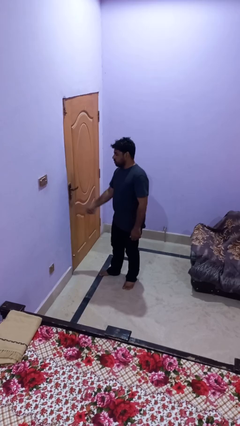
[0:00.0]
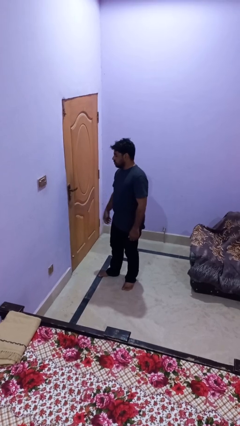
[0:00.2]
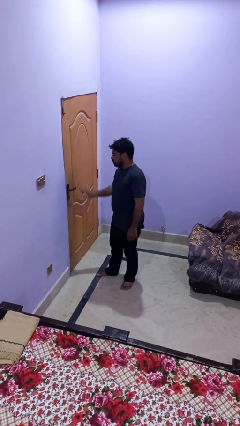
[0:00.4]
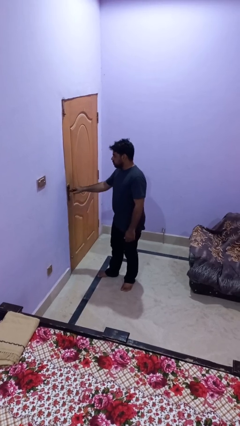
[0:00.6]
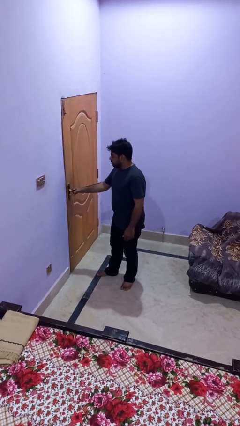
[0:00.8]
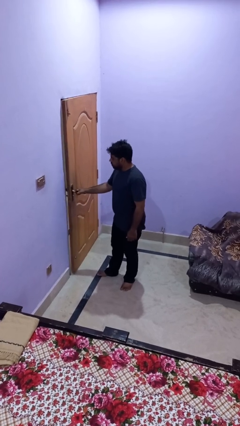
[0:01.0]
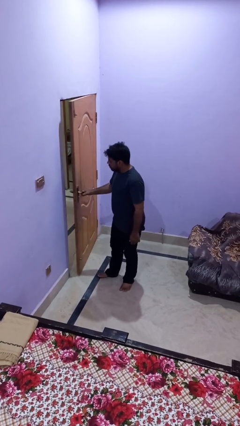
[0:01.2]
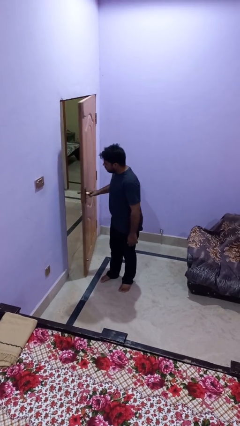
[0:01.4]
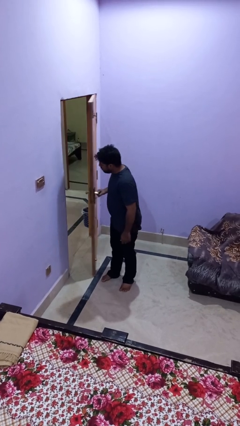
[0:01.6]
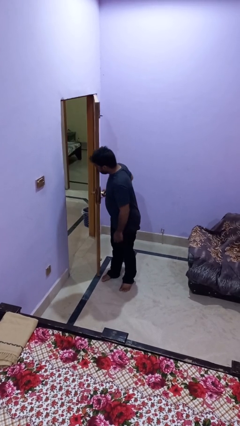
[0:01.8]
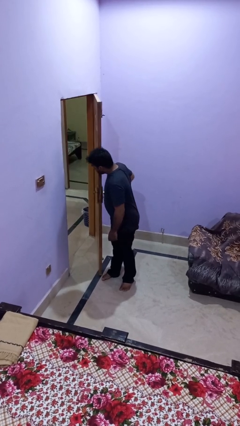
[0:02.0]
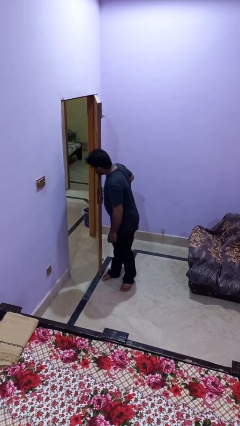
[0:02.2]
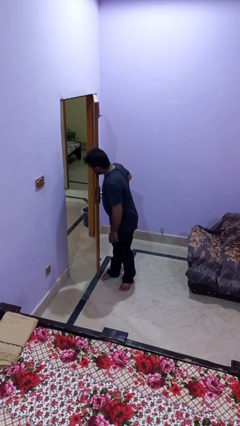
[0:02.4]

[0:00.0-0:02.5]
person opens facility door

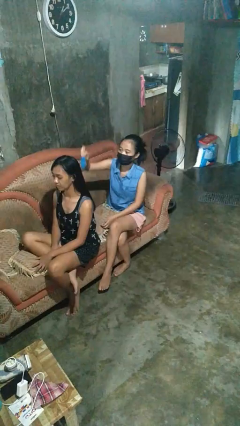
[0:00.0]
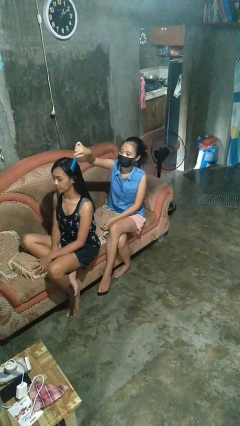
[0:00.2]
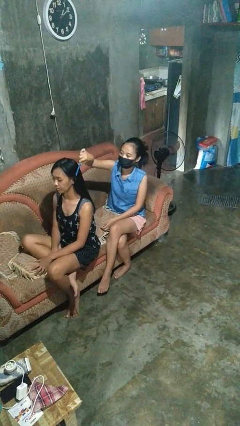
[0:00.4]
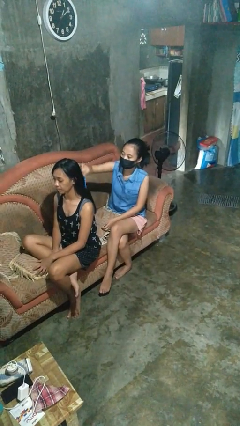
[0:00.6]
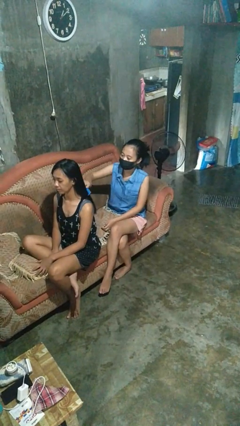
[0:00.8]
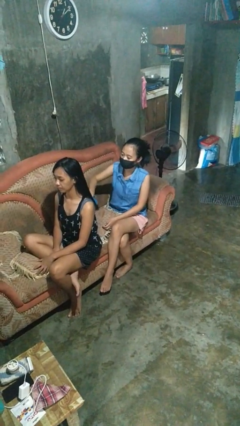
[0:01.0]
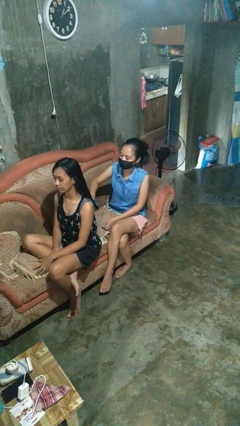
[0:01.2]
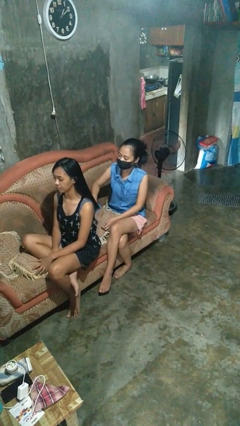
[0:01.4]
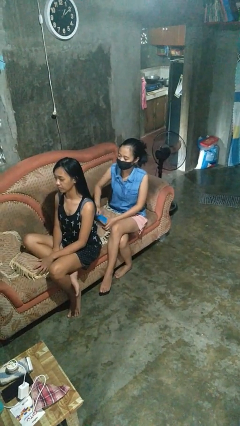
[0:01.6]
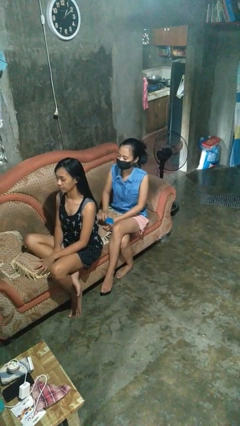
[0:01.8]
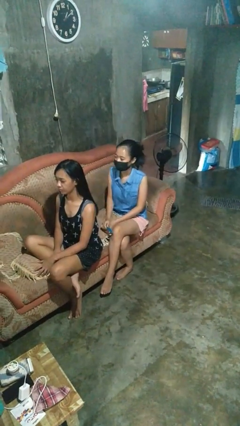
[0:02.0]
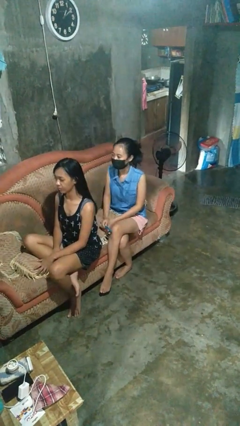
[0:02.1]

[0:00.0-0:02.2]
person brushes hair of person

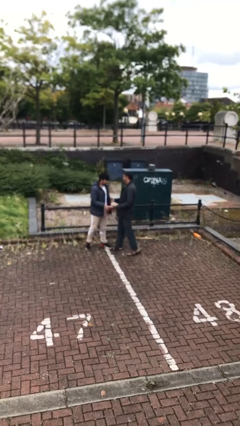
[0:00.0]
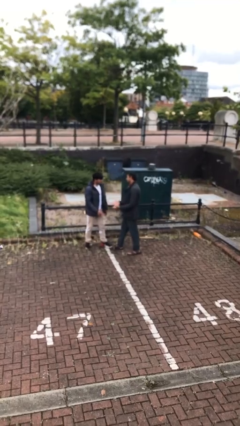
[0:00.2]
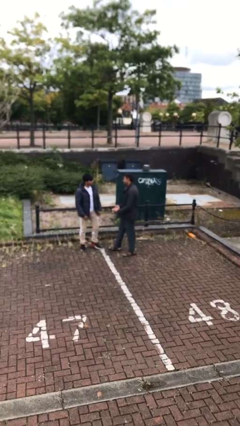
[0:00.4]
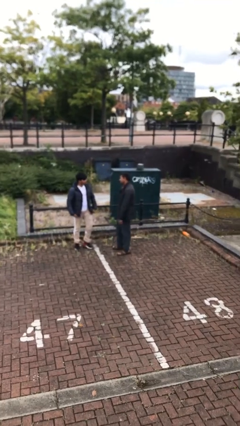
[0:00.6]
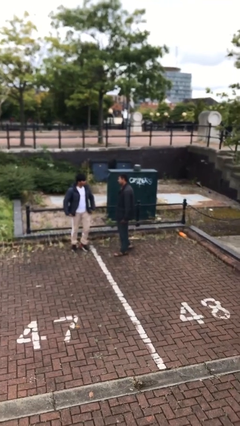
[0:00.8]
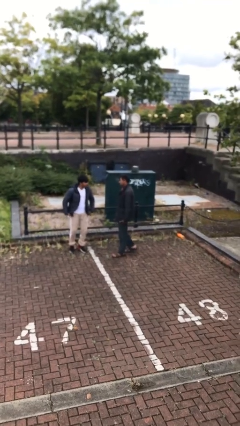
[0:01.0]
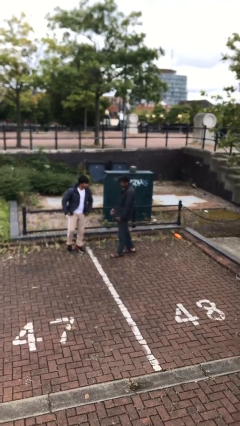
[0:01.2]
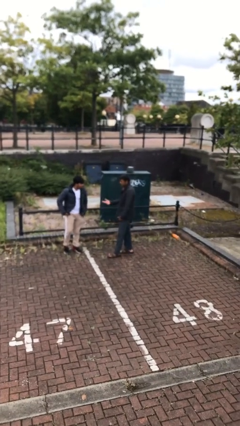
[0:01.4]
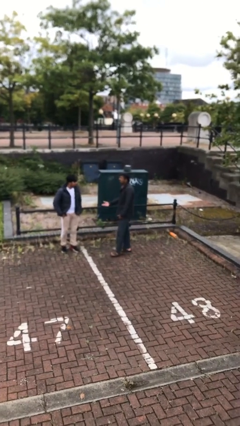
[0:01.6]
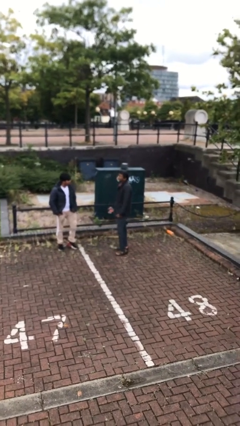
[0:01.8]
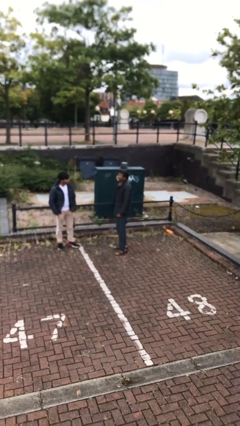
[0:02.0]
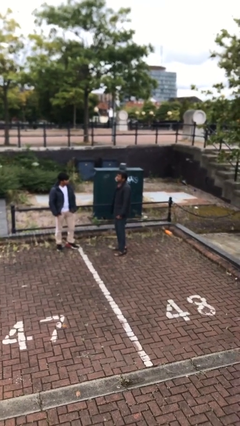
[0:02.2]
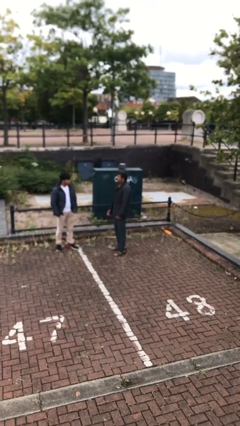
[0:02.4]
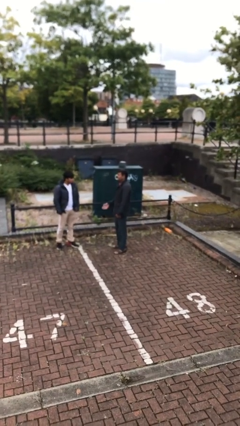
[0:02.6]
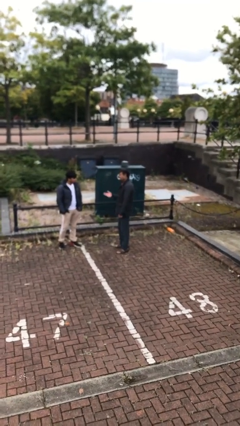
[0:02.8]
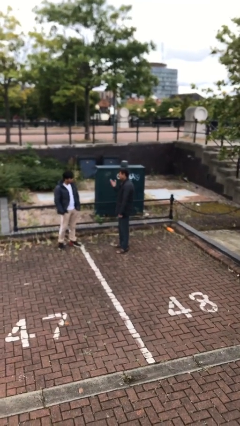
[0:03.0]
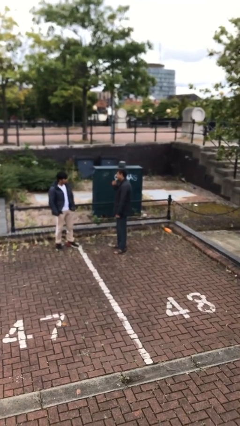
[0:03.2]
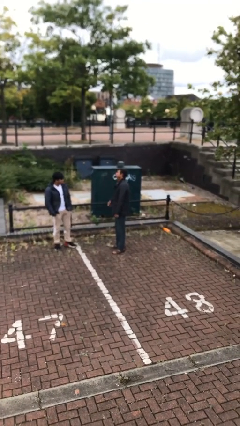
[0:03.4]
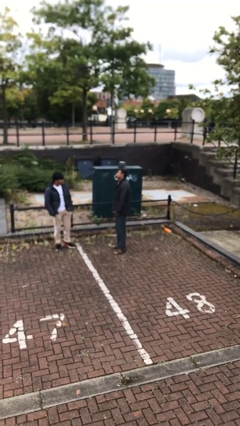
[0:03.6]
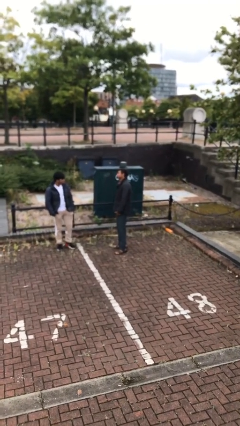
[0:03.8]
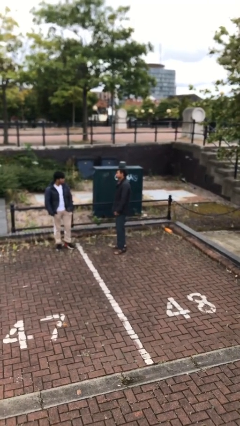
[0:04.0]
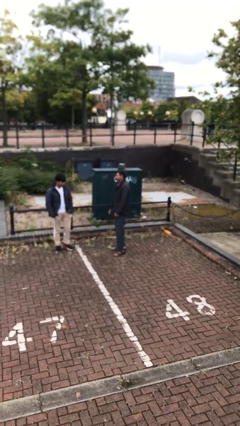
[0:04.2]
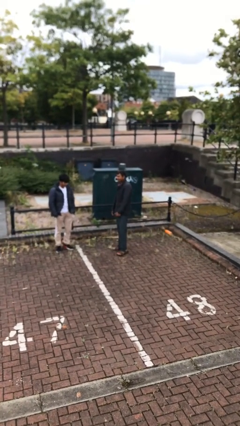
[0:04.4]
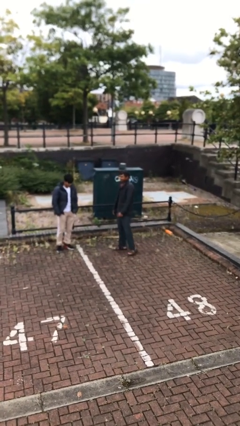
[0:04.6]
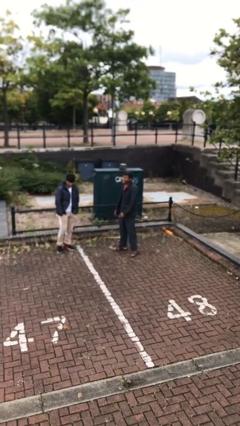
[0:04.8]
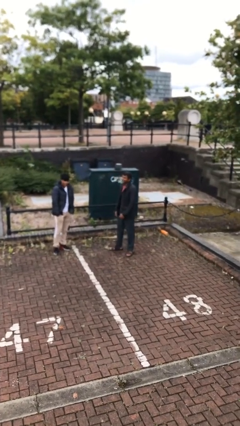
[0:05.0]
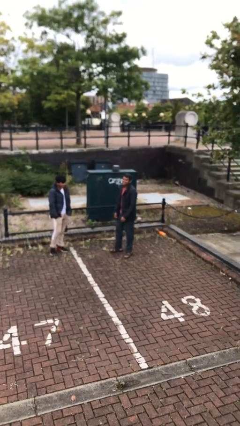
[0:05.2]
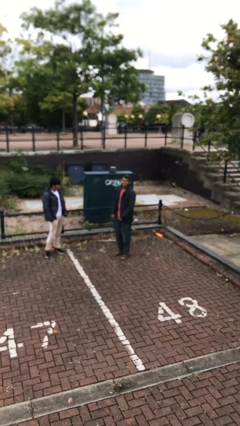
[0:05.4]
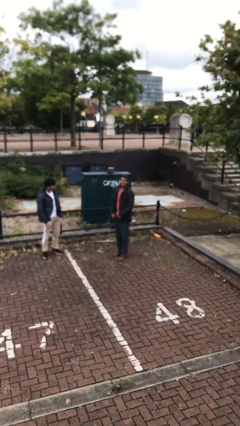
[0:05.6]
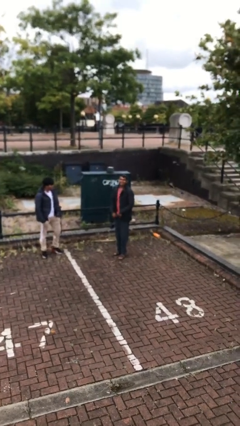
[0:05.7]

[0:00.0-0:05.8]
person talks to person

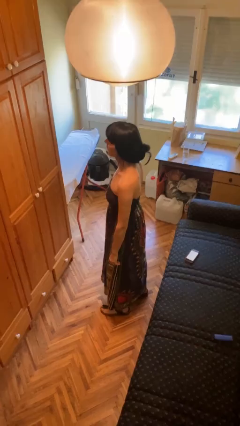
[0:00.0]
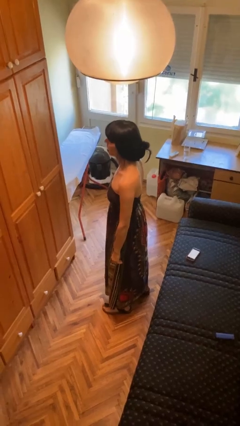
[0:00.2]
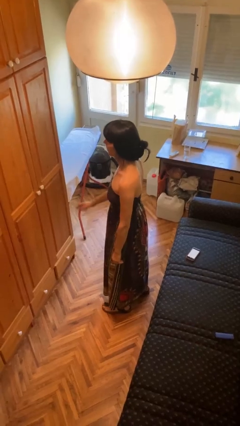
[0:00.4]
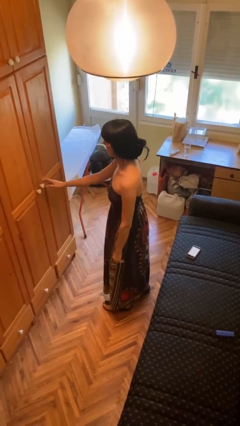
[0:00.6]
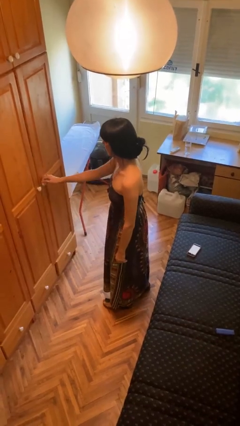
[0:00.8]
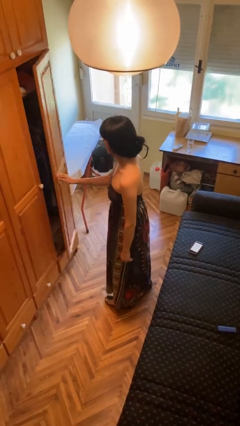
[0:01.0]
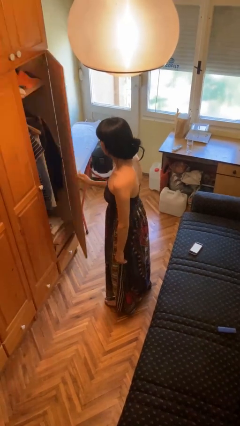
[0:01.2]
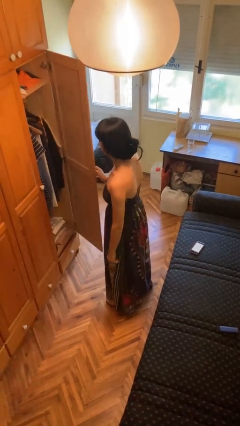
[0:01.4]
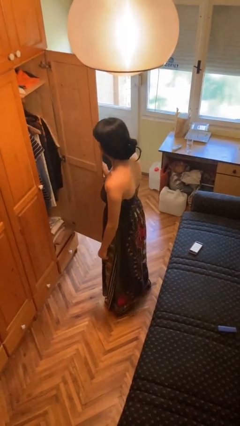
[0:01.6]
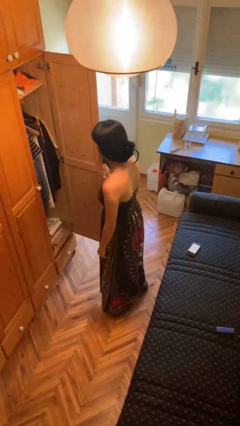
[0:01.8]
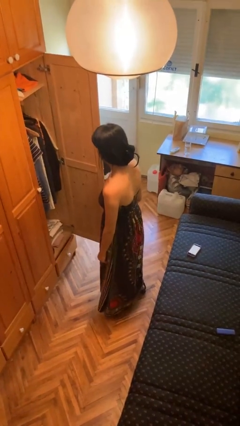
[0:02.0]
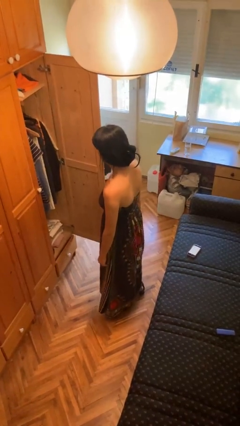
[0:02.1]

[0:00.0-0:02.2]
person opens closet door

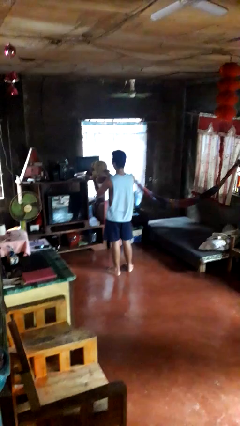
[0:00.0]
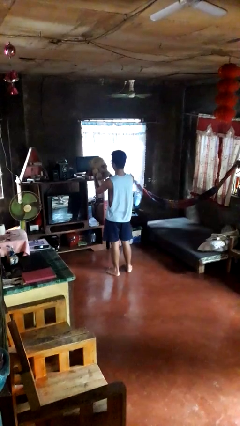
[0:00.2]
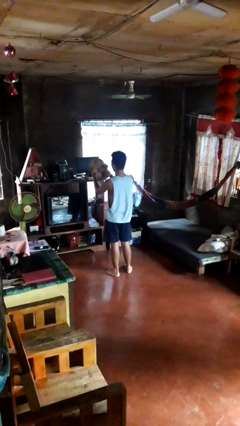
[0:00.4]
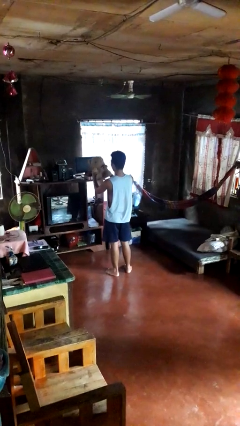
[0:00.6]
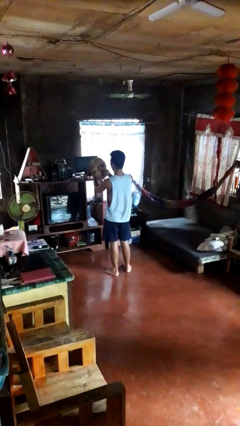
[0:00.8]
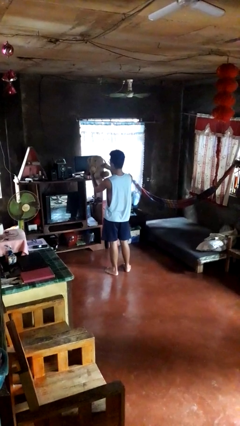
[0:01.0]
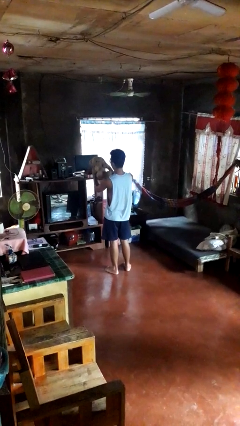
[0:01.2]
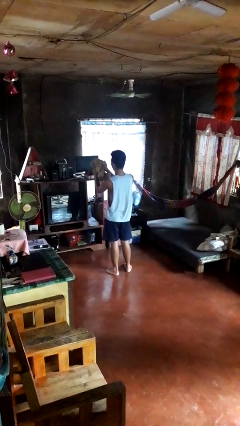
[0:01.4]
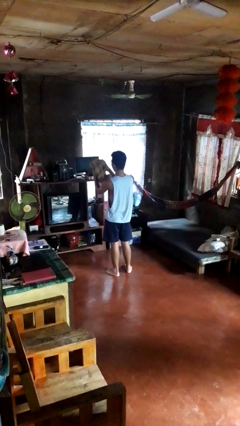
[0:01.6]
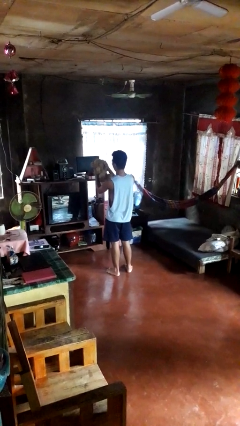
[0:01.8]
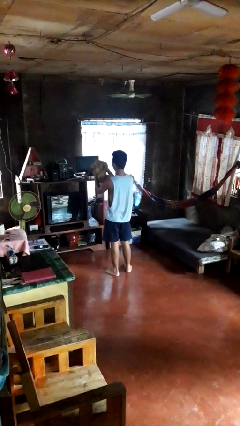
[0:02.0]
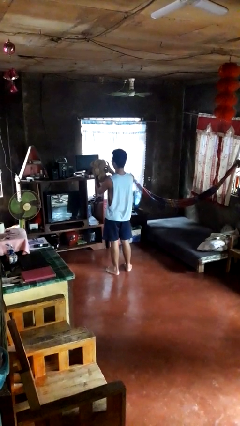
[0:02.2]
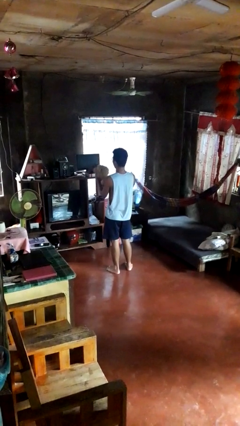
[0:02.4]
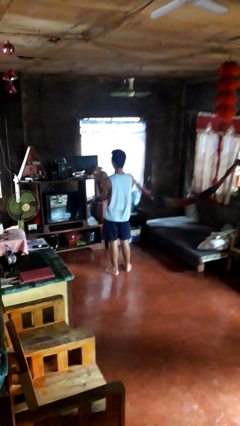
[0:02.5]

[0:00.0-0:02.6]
person squeezes object

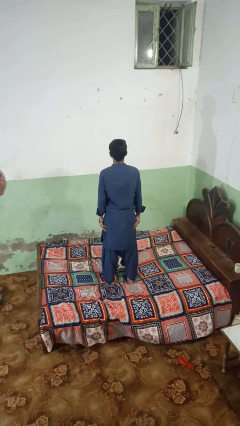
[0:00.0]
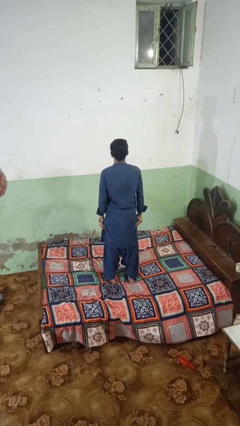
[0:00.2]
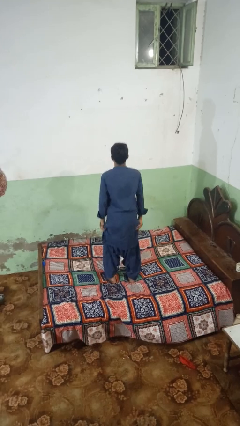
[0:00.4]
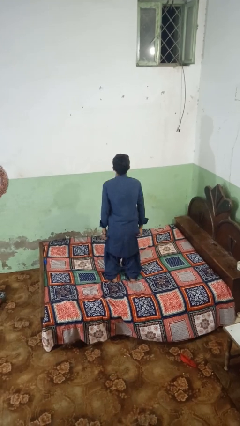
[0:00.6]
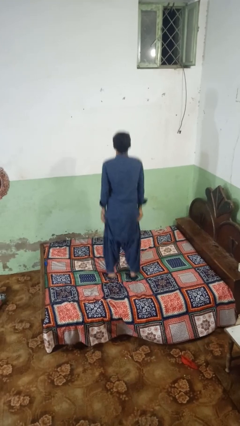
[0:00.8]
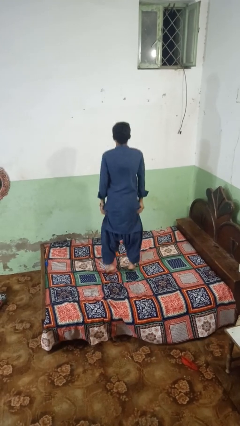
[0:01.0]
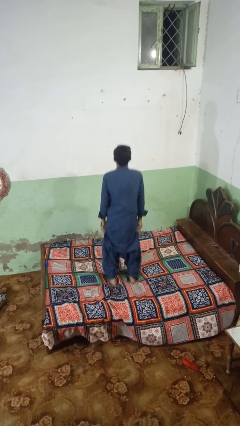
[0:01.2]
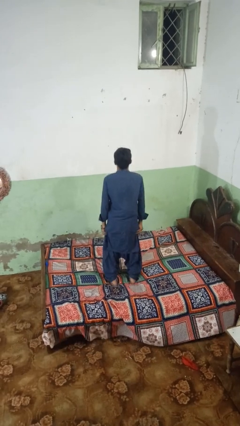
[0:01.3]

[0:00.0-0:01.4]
person jumps on bed

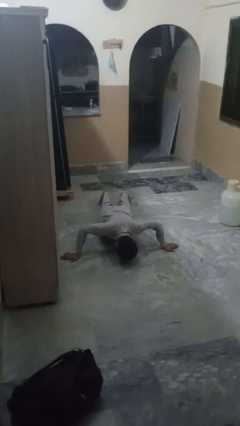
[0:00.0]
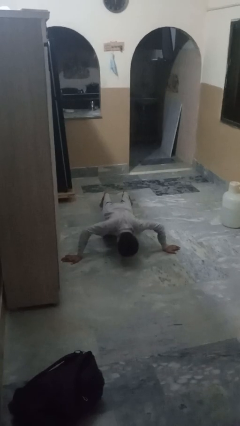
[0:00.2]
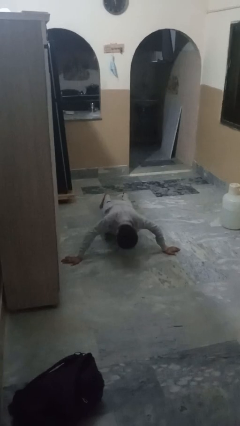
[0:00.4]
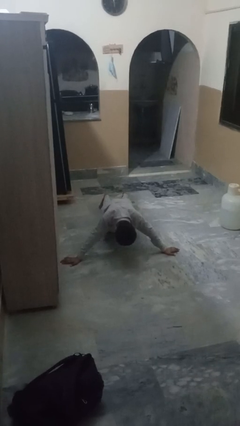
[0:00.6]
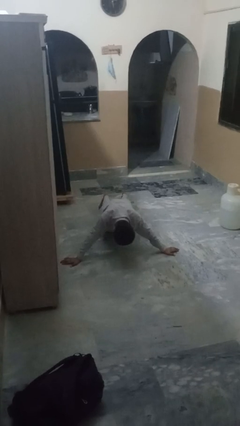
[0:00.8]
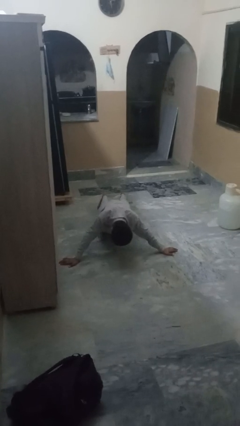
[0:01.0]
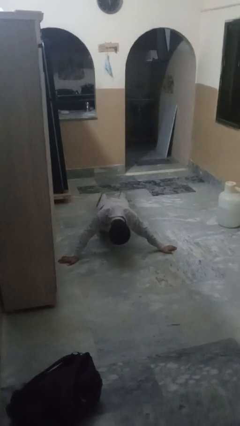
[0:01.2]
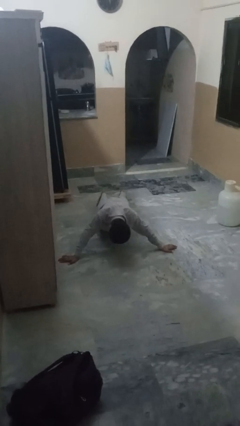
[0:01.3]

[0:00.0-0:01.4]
person exercises with pushup
